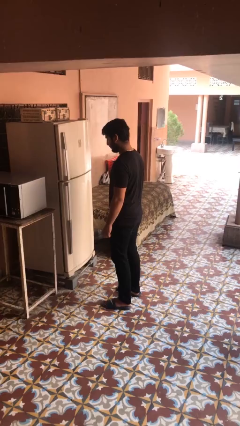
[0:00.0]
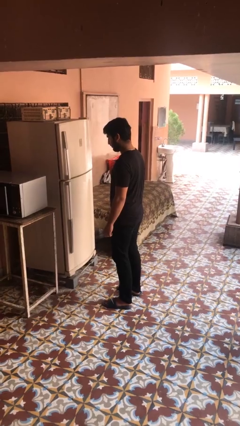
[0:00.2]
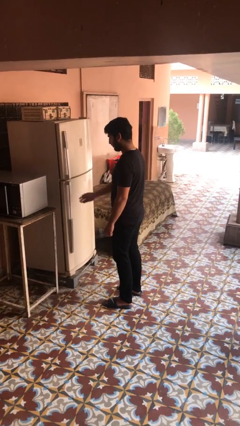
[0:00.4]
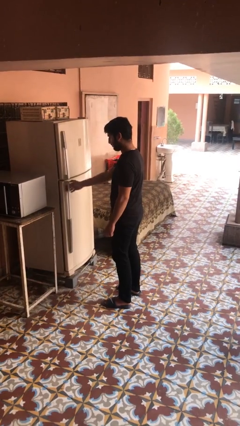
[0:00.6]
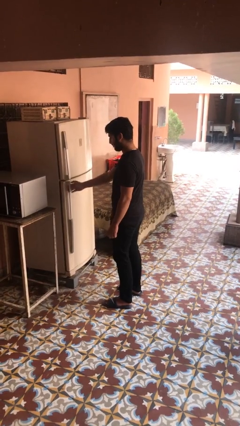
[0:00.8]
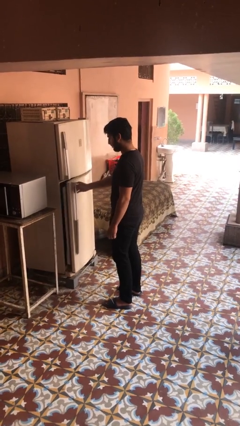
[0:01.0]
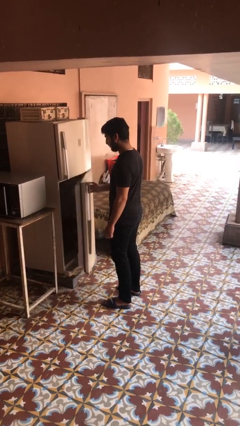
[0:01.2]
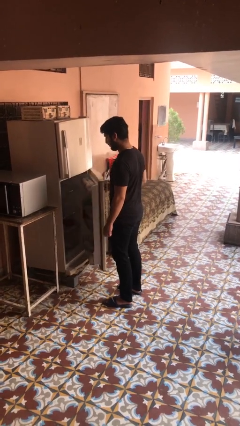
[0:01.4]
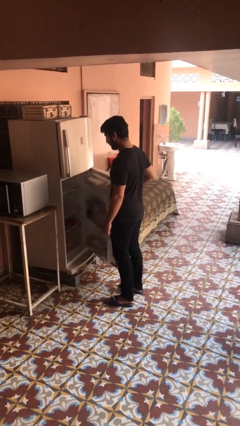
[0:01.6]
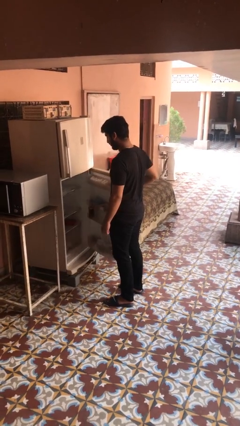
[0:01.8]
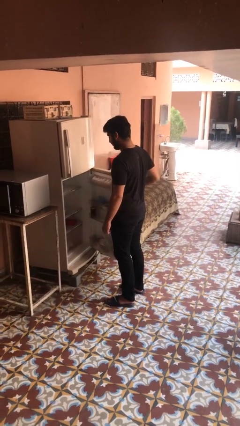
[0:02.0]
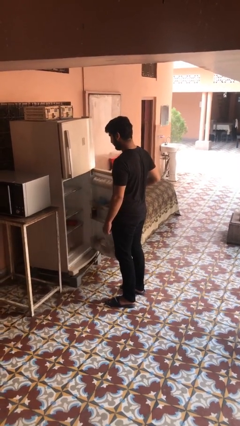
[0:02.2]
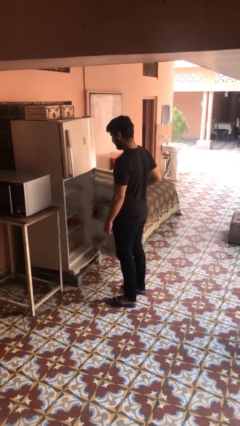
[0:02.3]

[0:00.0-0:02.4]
person opens refrigerator

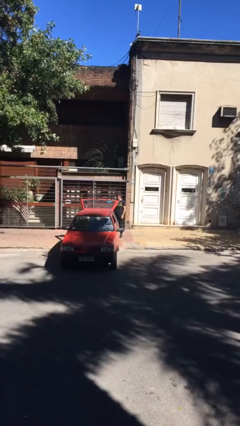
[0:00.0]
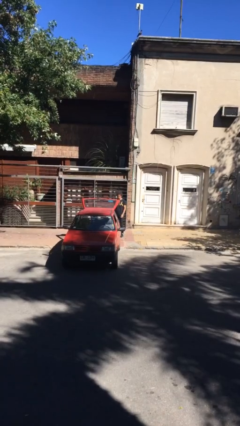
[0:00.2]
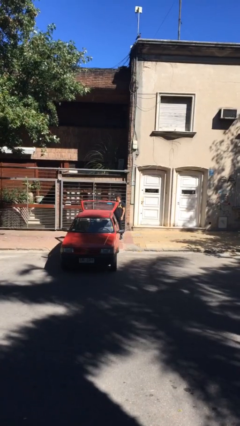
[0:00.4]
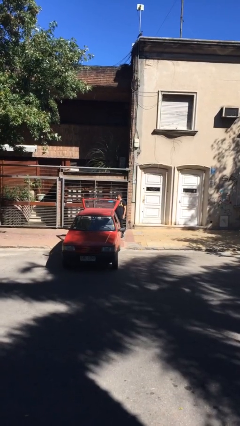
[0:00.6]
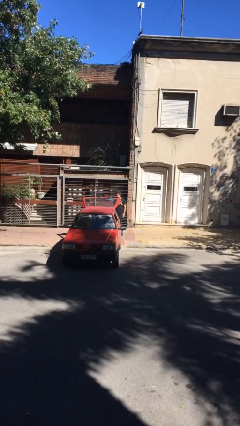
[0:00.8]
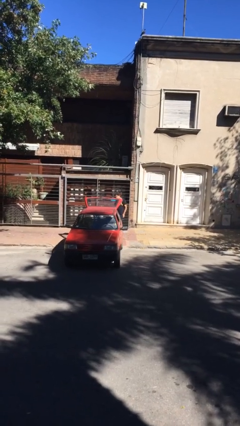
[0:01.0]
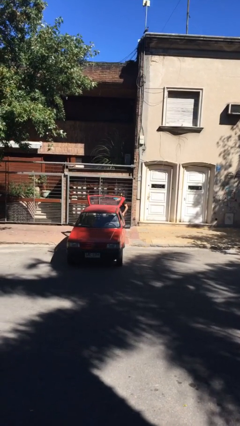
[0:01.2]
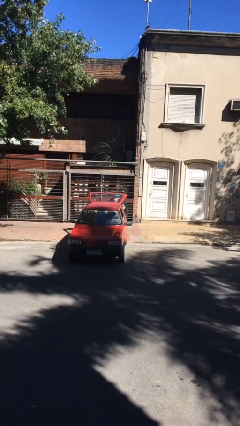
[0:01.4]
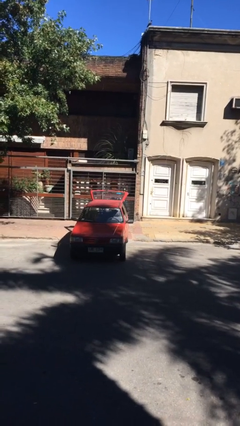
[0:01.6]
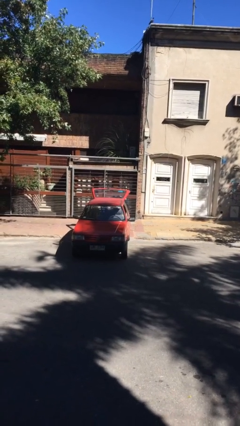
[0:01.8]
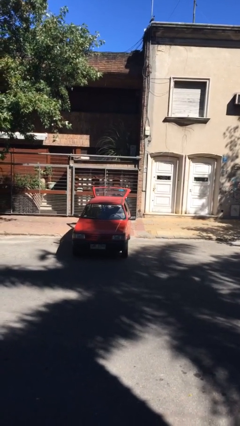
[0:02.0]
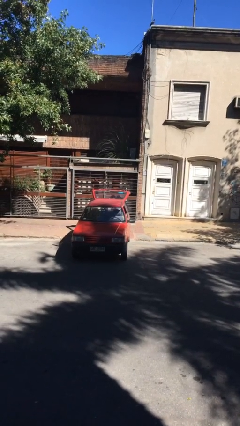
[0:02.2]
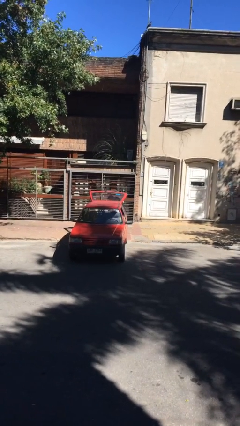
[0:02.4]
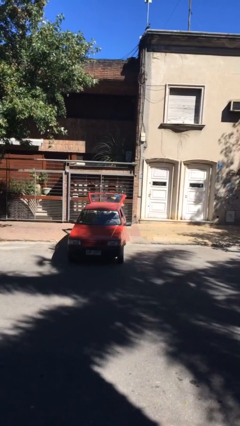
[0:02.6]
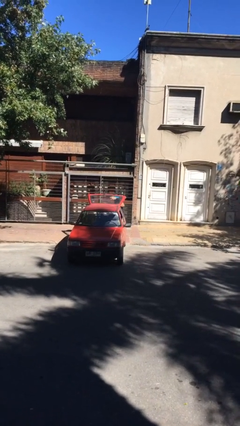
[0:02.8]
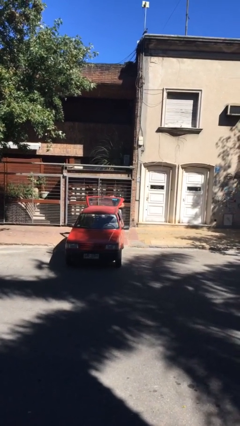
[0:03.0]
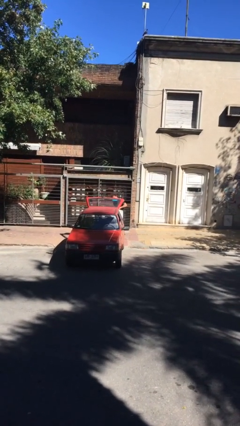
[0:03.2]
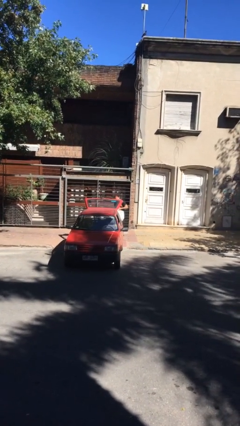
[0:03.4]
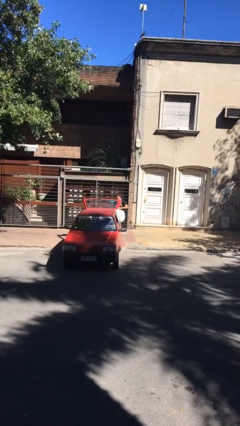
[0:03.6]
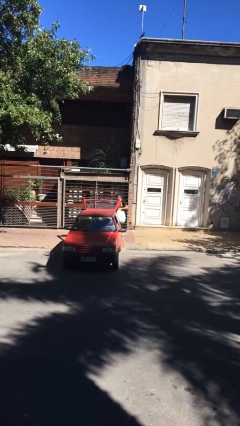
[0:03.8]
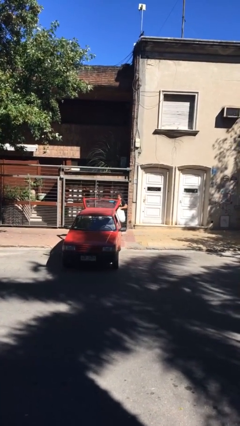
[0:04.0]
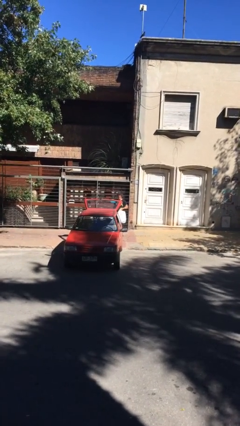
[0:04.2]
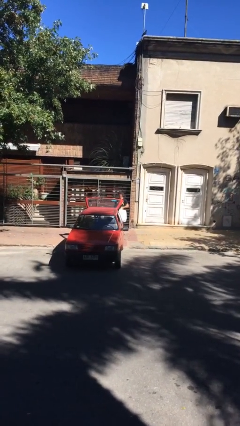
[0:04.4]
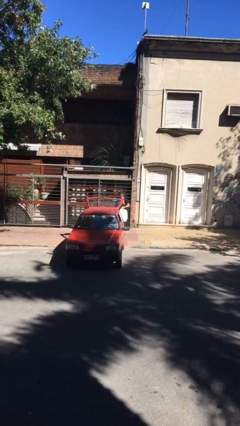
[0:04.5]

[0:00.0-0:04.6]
person unloads car

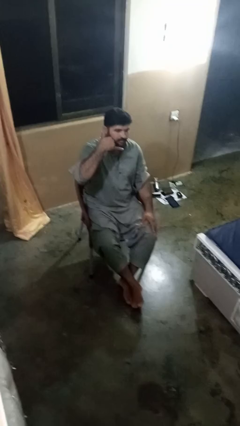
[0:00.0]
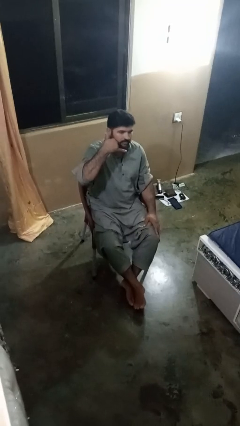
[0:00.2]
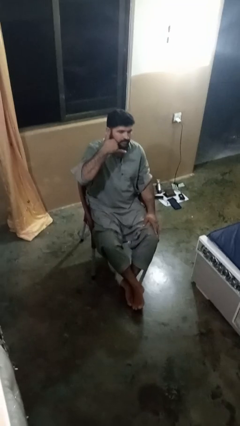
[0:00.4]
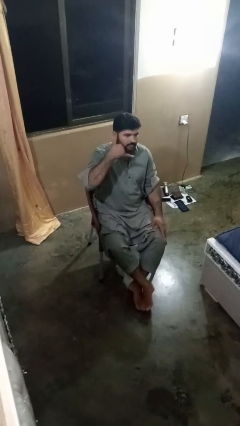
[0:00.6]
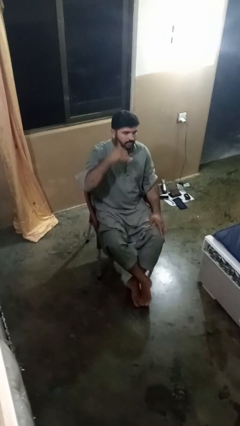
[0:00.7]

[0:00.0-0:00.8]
person gestures call me

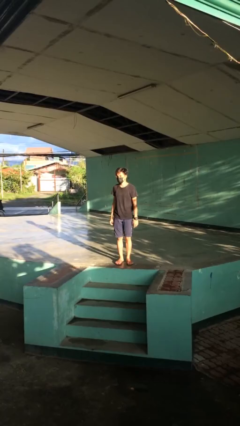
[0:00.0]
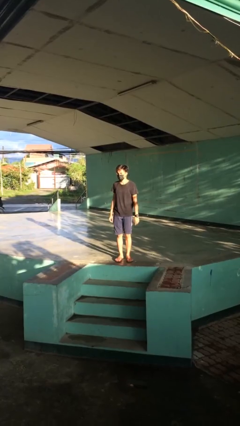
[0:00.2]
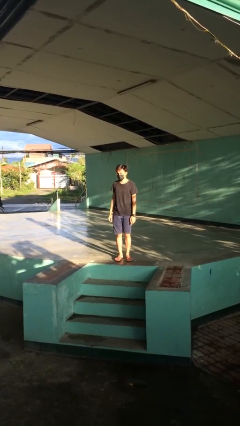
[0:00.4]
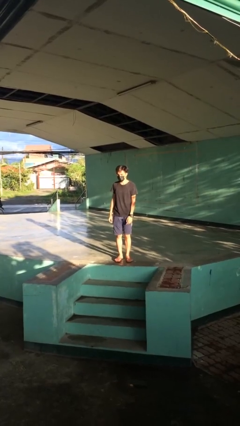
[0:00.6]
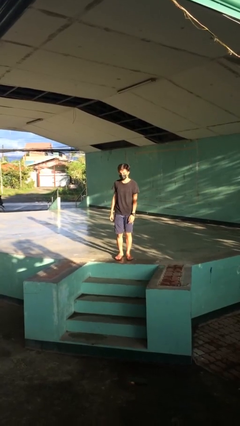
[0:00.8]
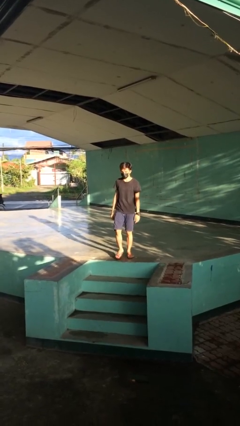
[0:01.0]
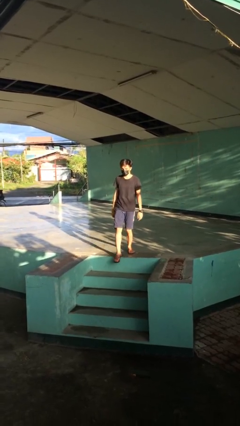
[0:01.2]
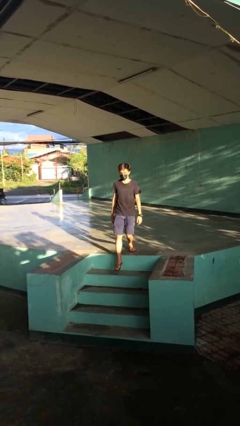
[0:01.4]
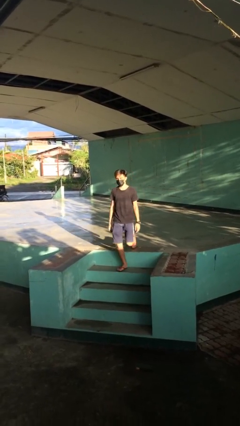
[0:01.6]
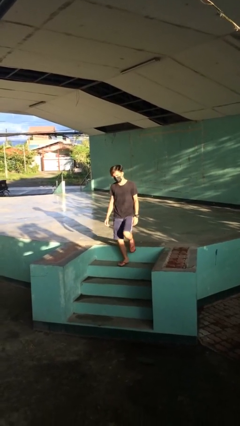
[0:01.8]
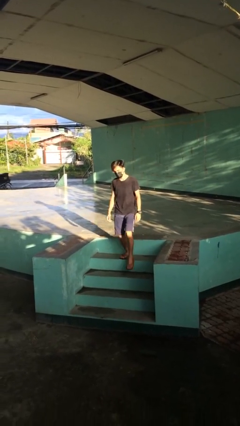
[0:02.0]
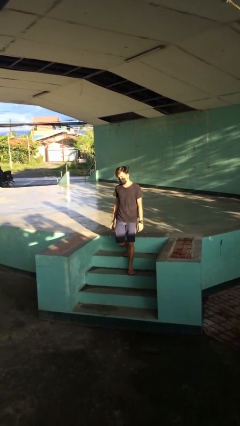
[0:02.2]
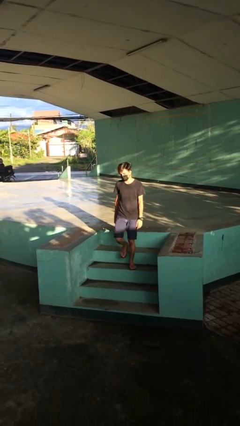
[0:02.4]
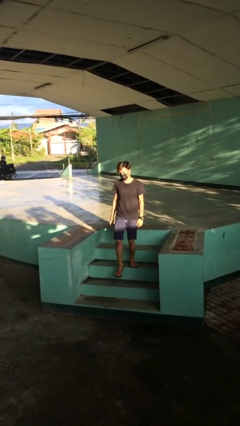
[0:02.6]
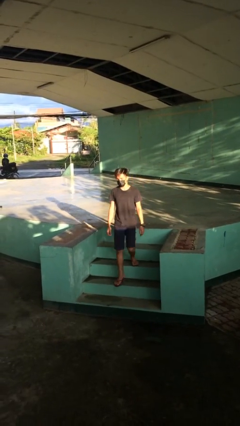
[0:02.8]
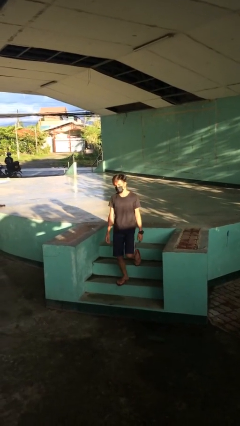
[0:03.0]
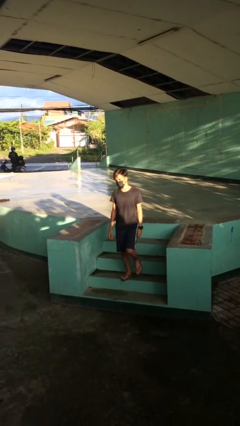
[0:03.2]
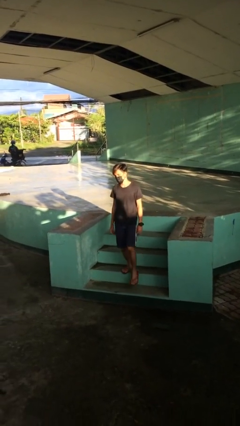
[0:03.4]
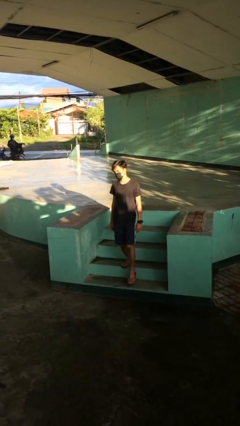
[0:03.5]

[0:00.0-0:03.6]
person climbs down stairs

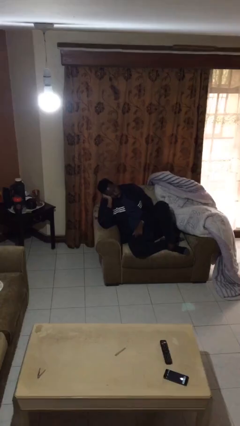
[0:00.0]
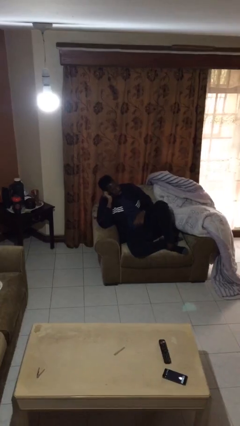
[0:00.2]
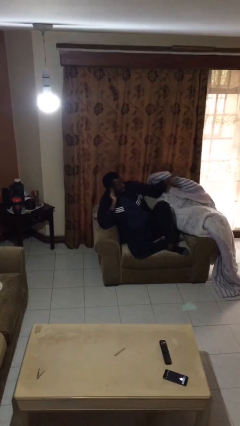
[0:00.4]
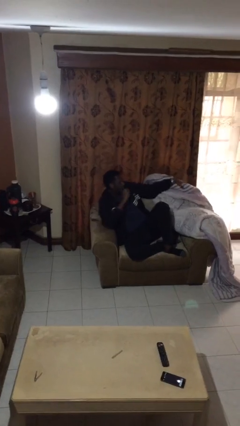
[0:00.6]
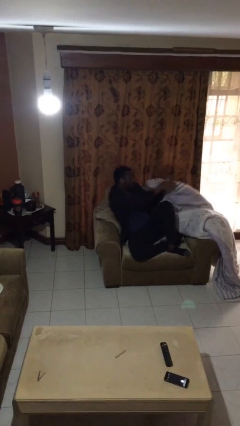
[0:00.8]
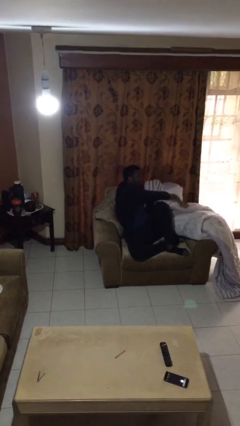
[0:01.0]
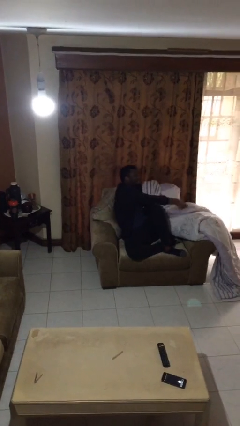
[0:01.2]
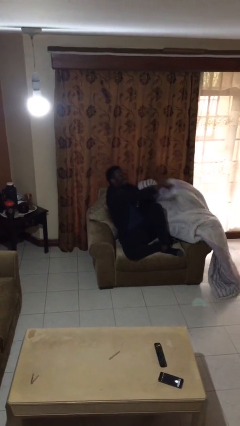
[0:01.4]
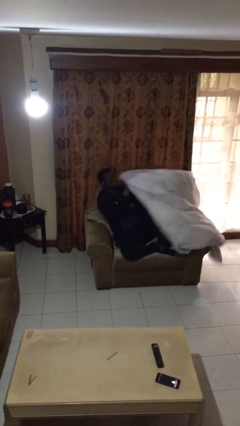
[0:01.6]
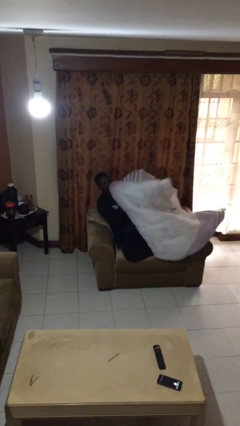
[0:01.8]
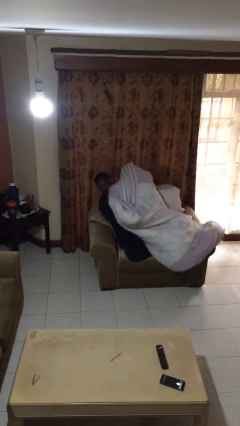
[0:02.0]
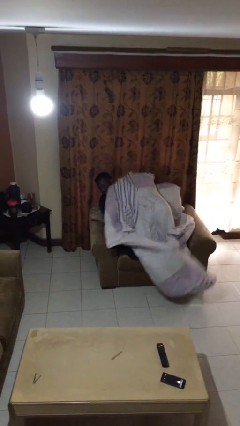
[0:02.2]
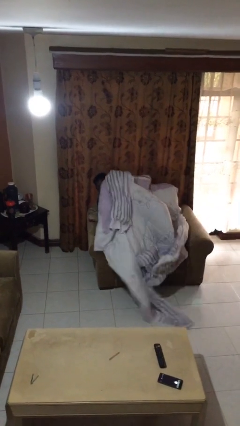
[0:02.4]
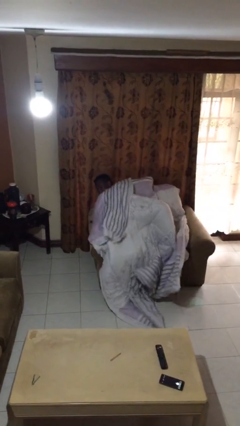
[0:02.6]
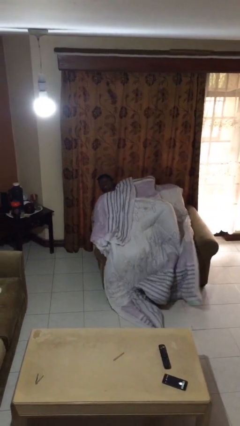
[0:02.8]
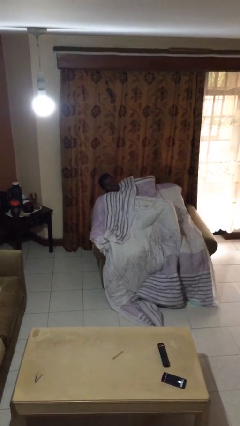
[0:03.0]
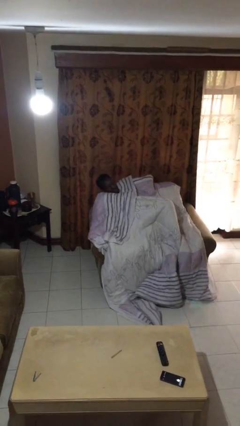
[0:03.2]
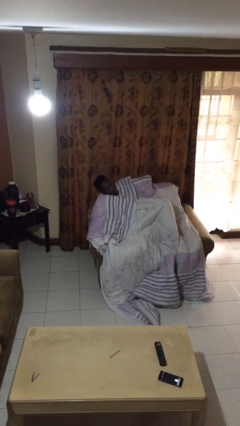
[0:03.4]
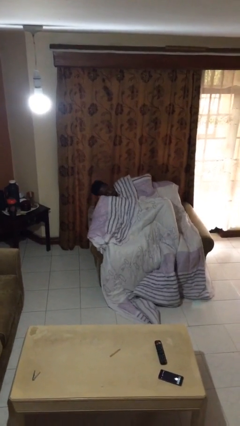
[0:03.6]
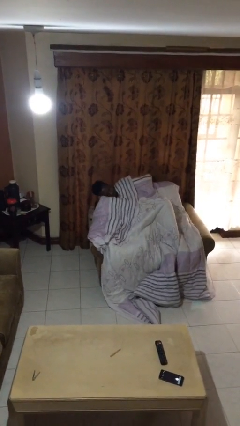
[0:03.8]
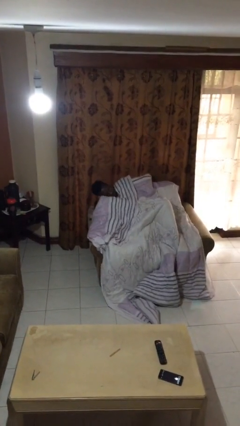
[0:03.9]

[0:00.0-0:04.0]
person covers with blanket

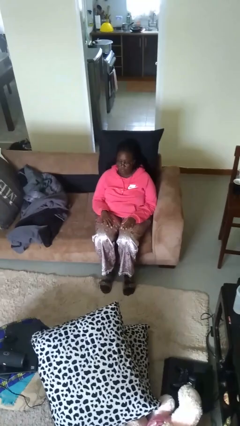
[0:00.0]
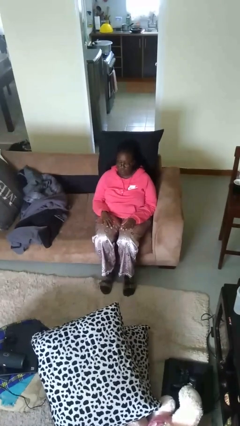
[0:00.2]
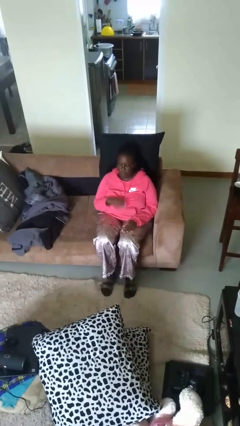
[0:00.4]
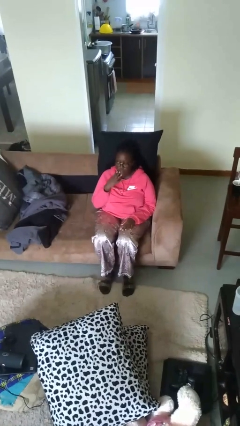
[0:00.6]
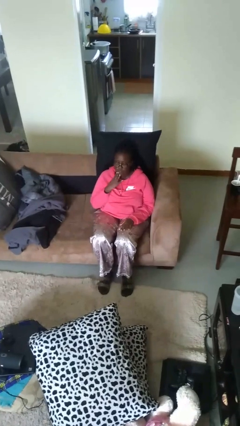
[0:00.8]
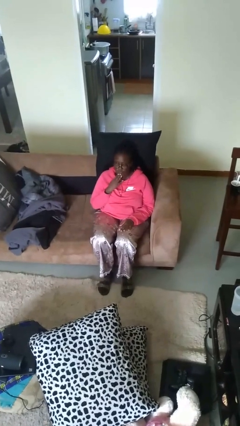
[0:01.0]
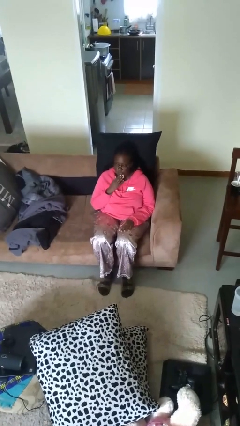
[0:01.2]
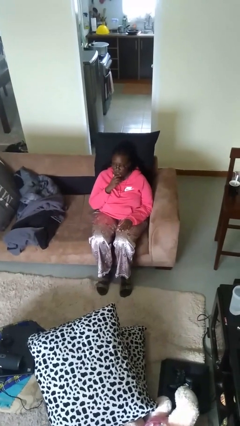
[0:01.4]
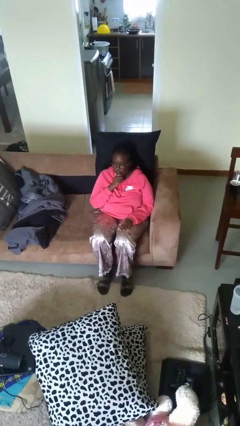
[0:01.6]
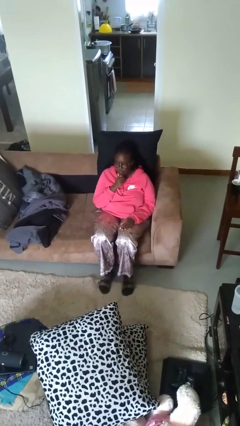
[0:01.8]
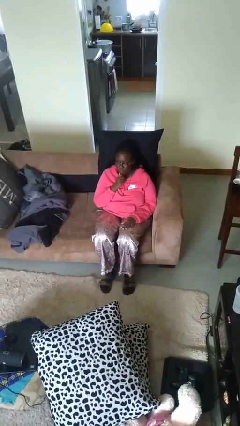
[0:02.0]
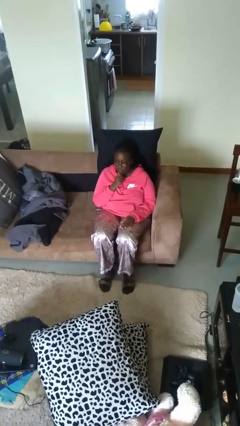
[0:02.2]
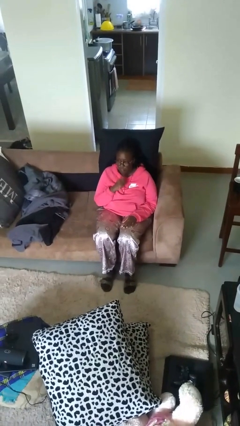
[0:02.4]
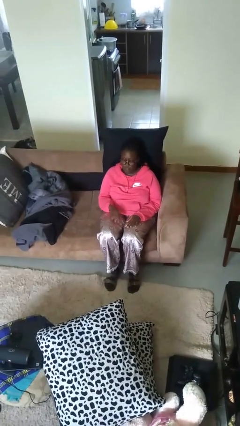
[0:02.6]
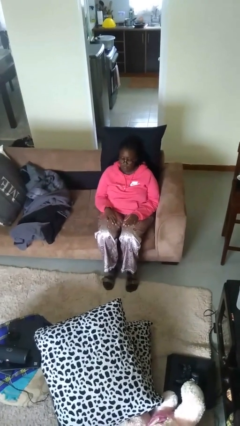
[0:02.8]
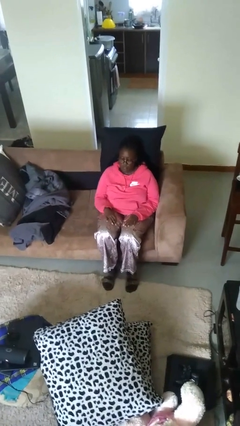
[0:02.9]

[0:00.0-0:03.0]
person strokes chin
